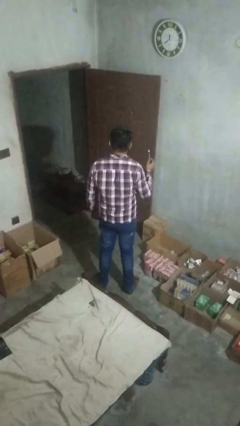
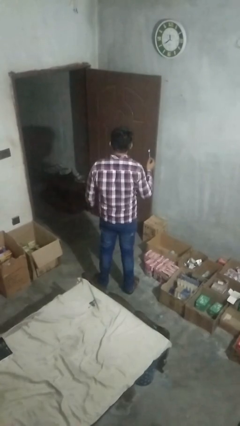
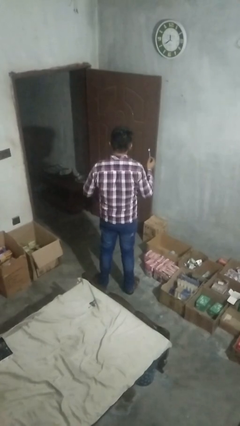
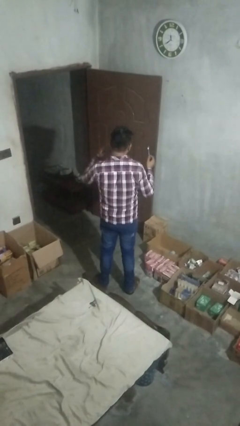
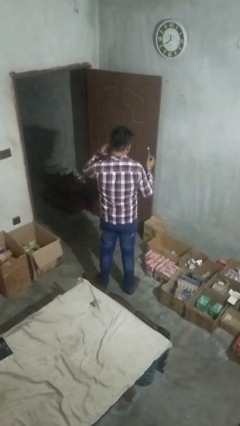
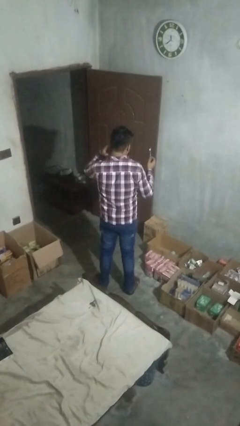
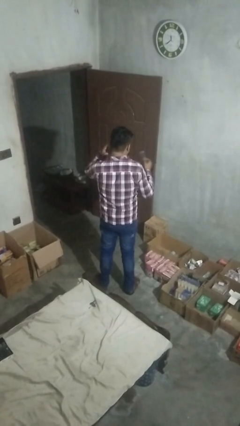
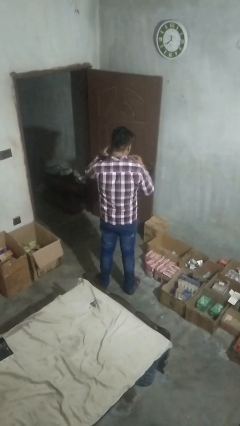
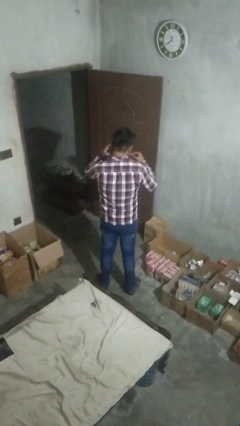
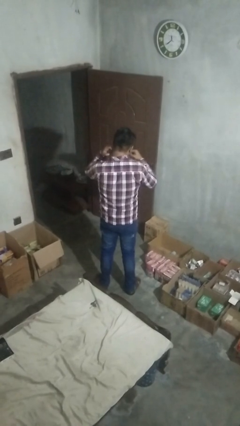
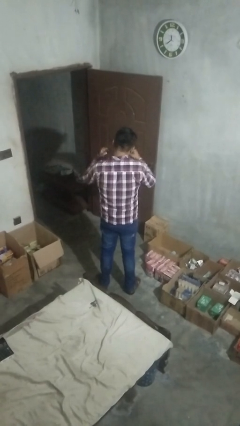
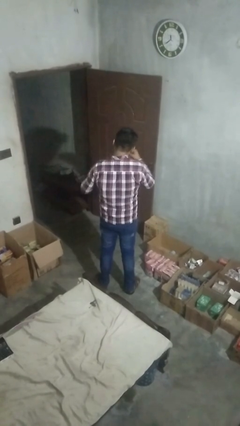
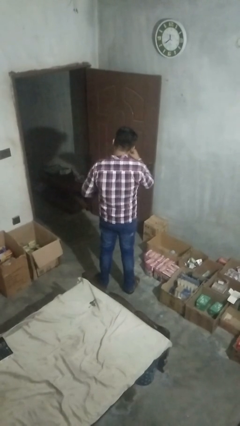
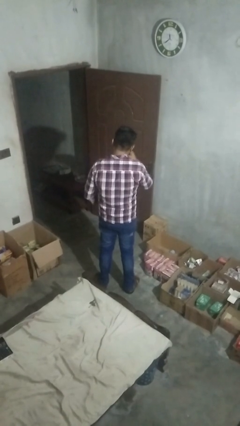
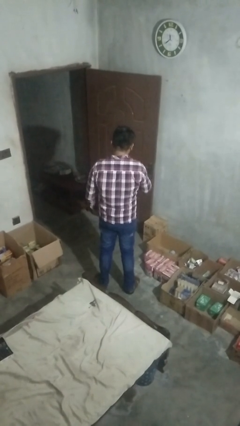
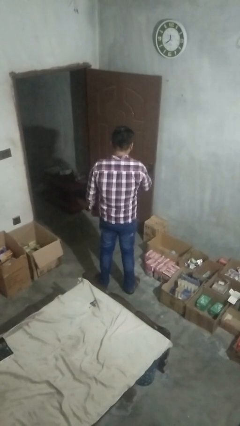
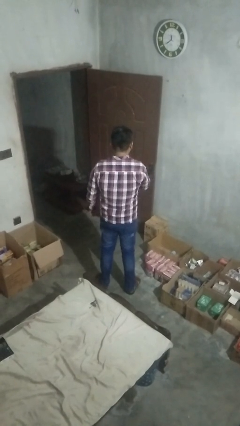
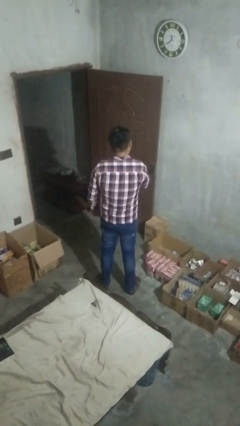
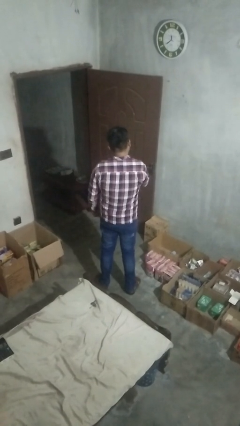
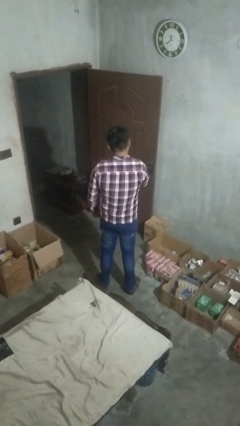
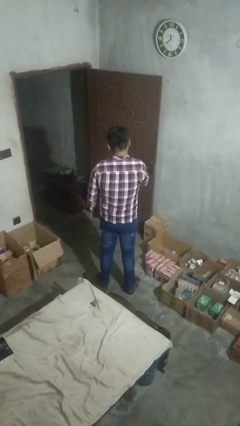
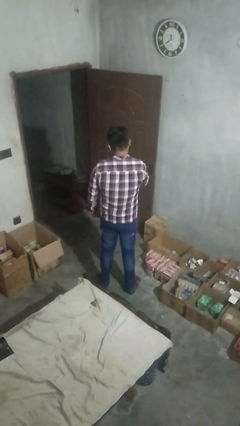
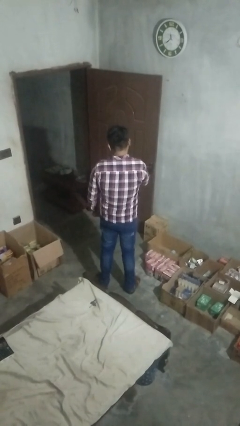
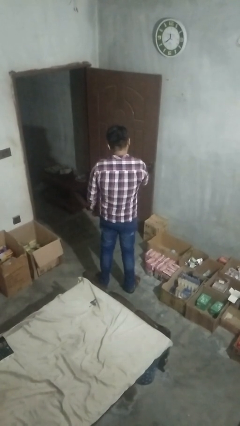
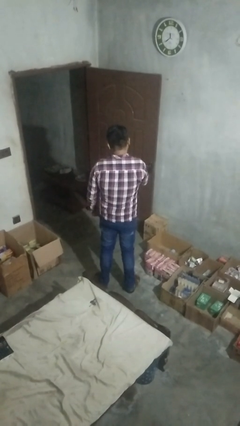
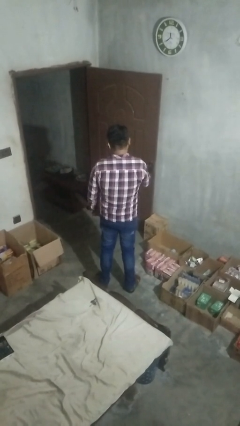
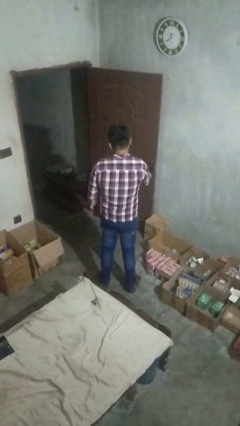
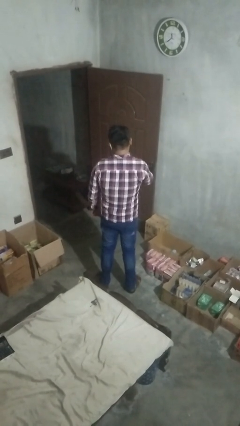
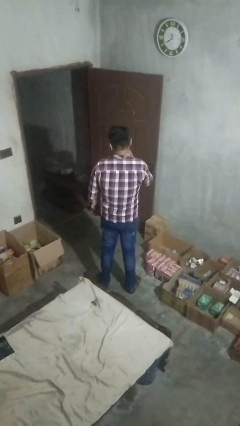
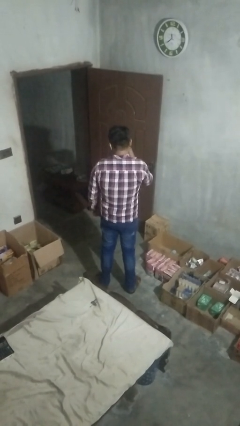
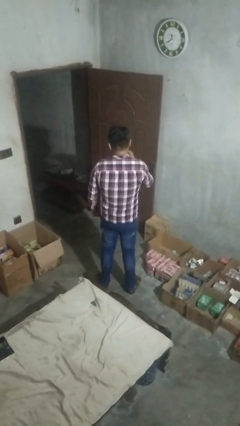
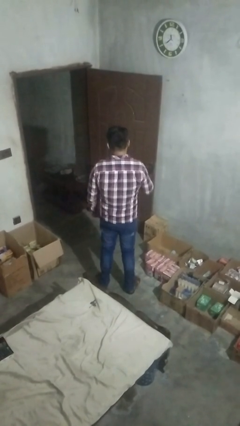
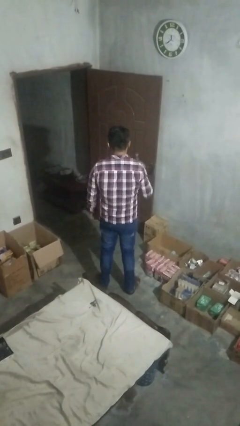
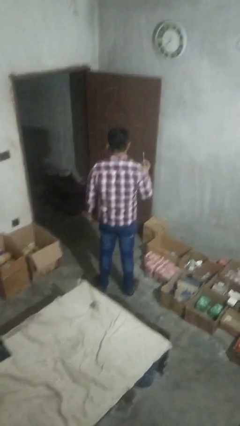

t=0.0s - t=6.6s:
person brushes teeth

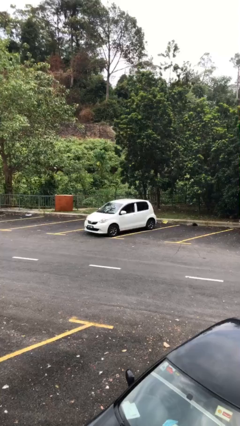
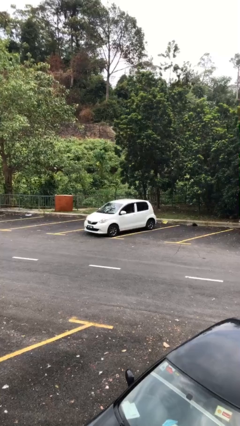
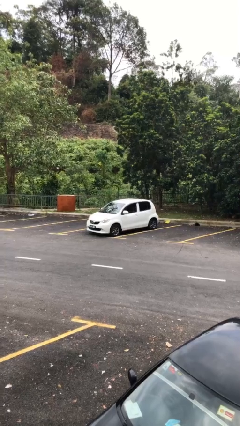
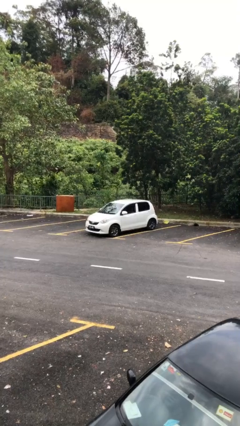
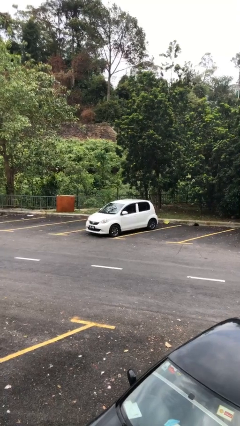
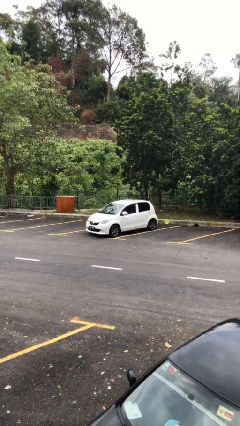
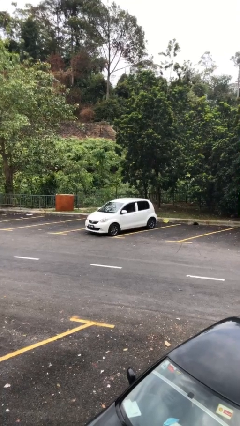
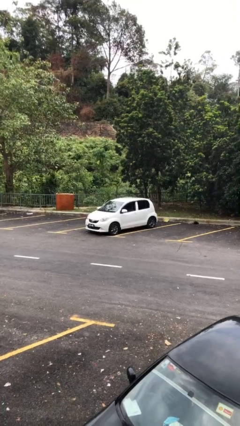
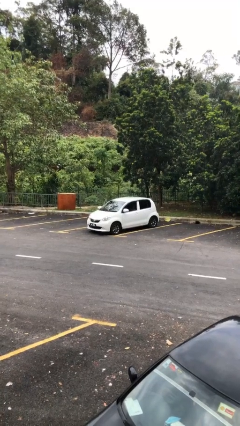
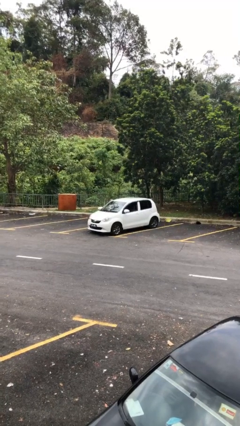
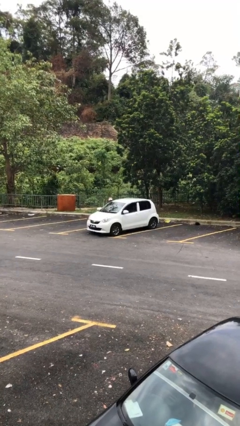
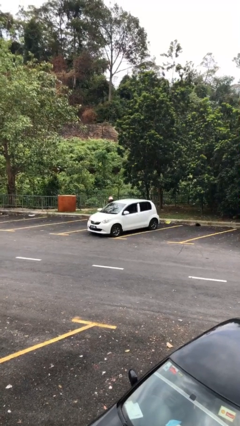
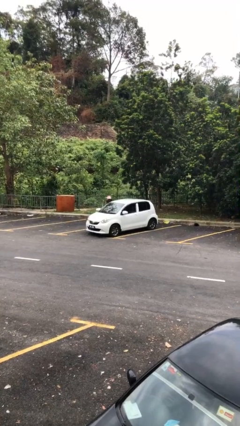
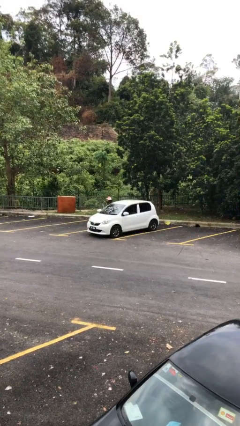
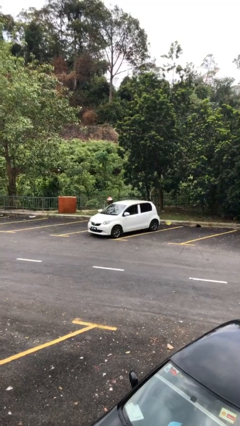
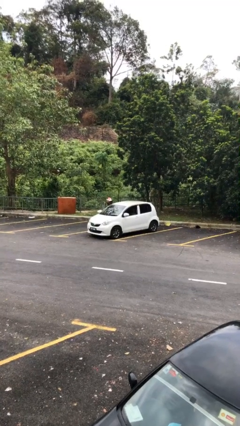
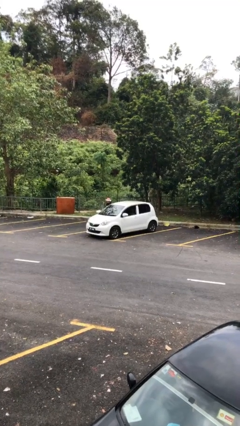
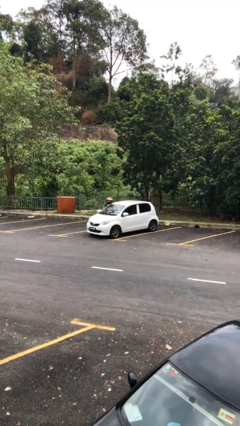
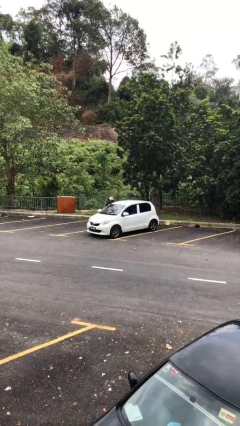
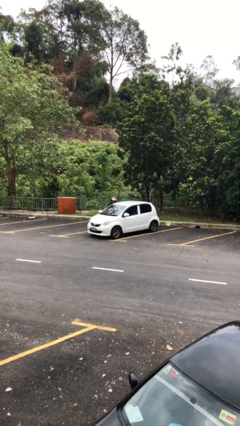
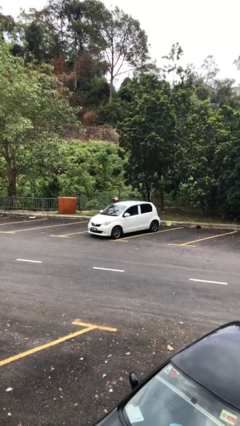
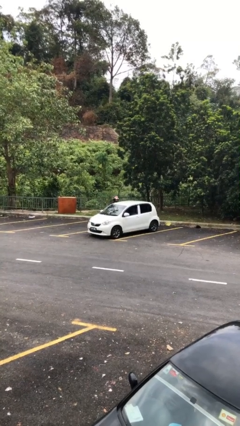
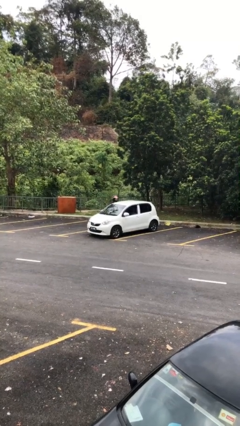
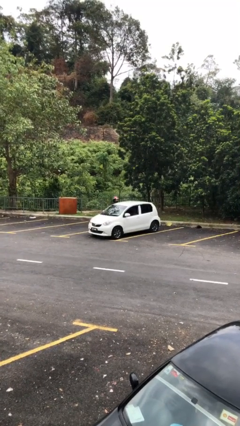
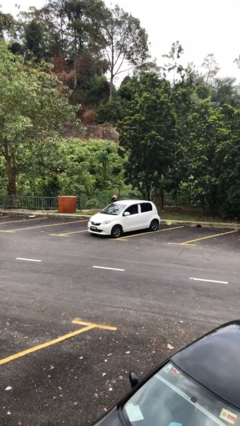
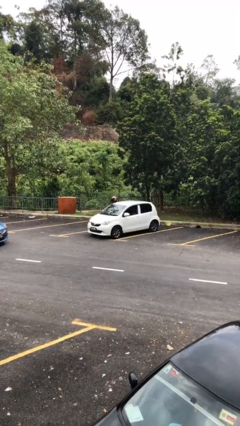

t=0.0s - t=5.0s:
car drops off person

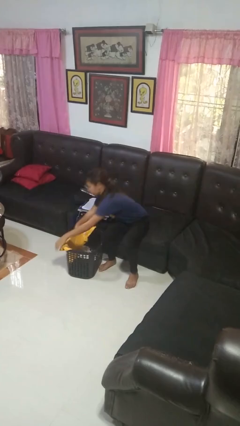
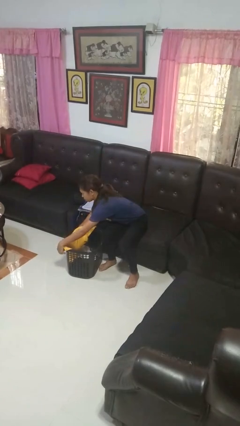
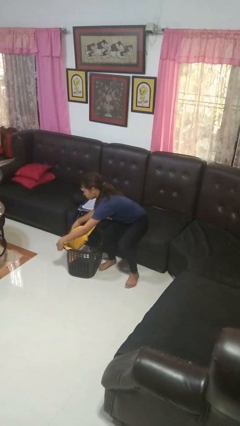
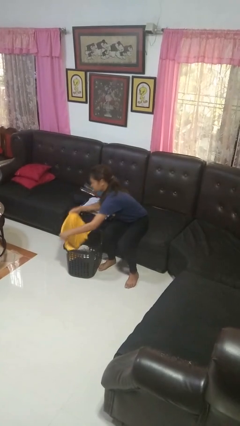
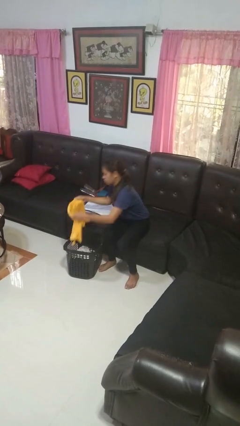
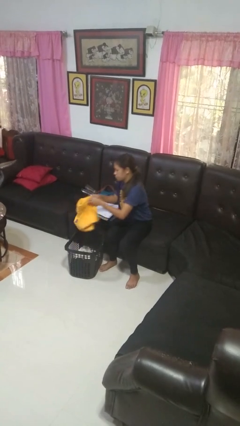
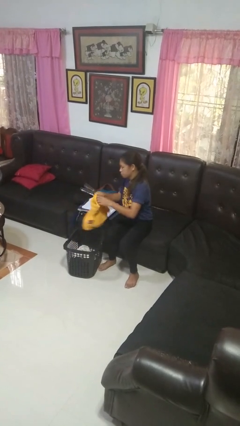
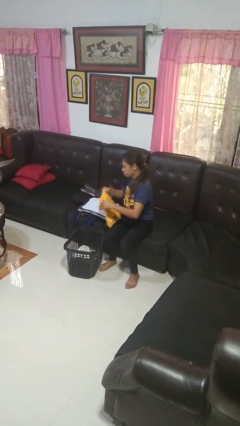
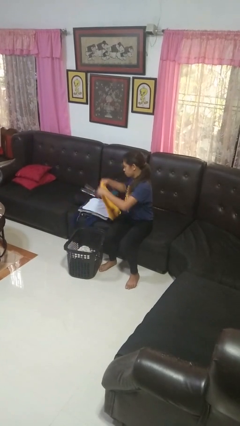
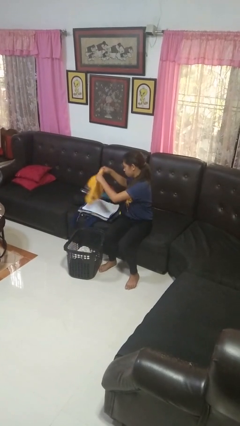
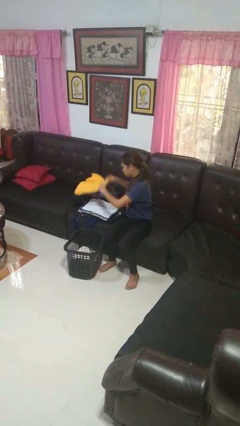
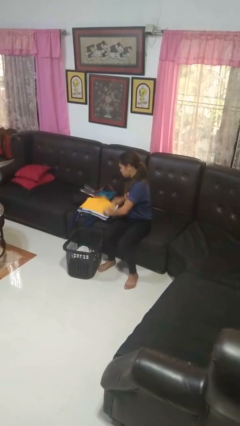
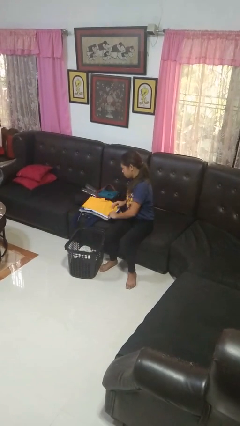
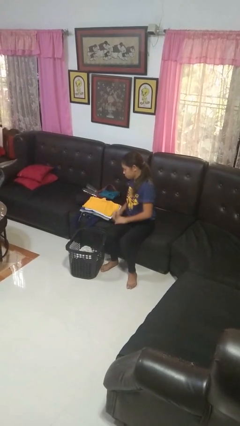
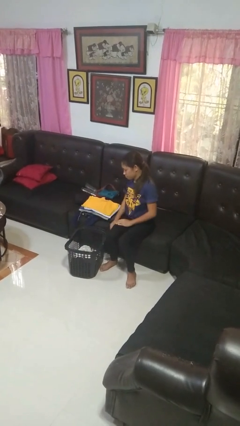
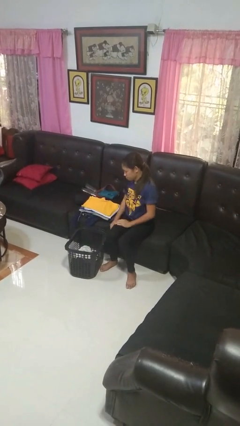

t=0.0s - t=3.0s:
person folds shirt

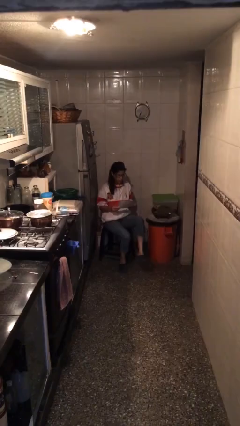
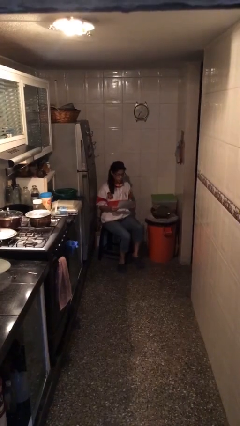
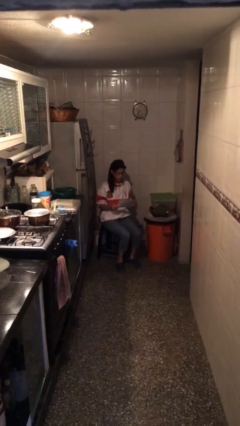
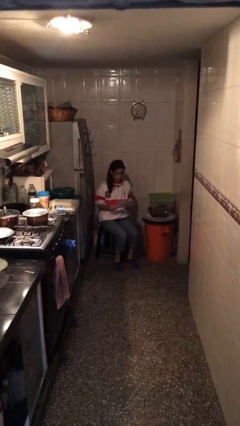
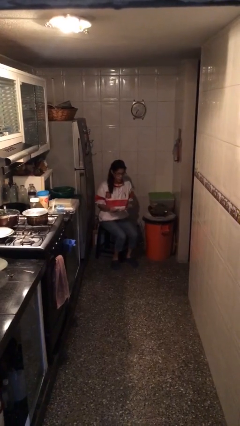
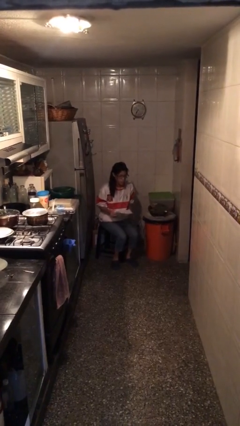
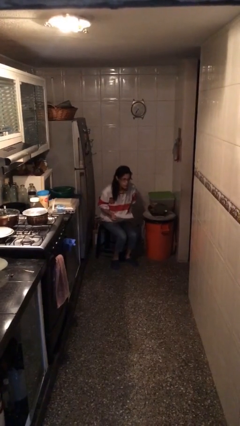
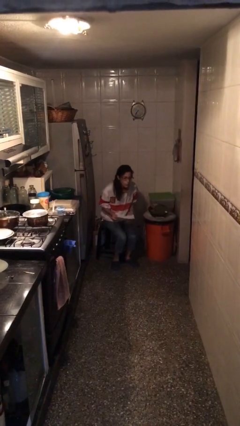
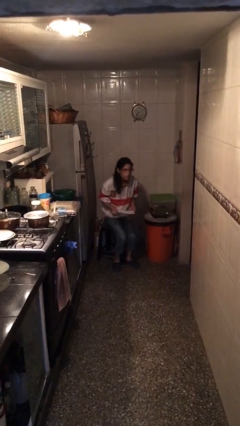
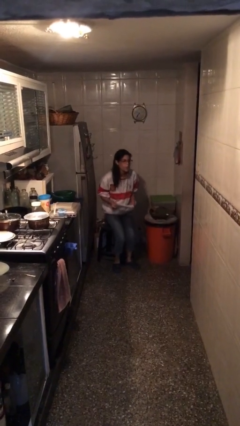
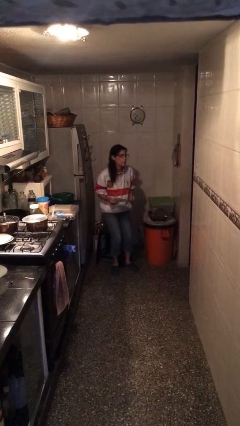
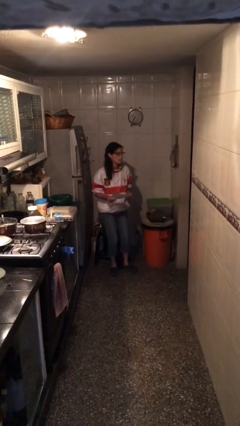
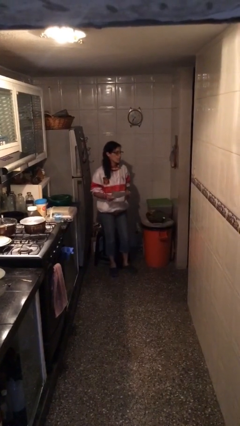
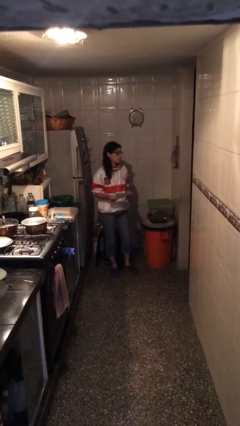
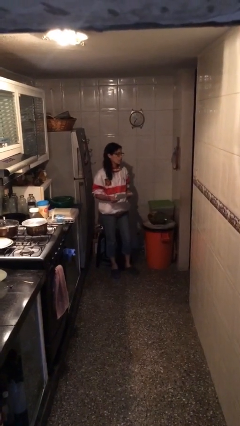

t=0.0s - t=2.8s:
person stands up

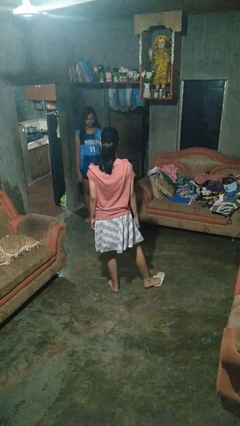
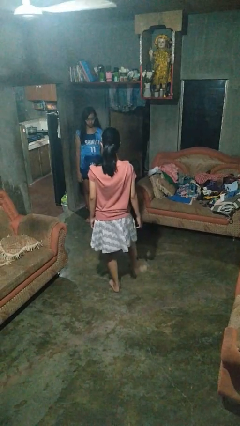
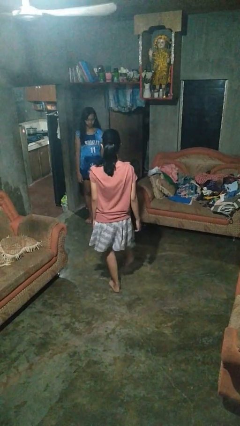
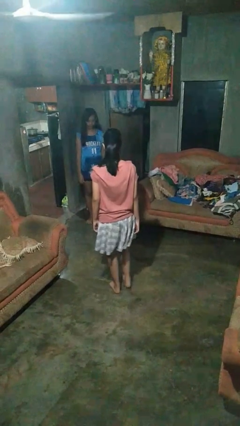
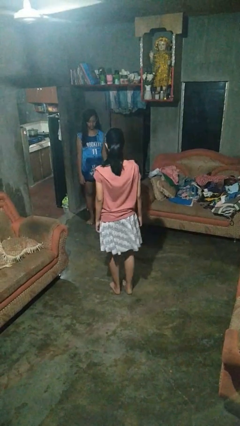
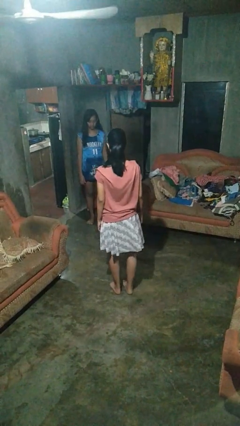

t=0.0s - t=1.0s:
person kicks object to person
